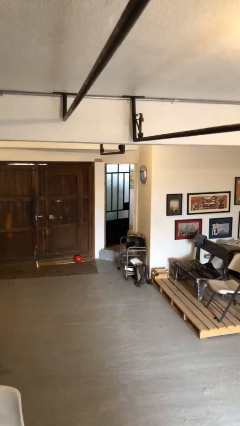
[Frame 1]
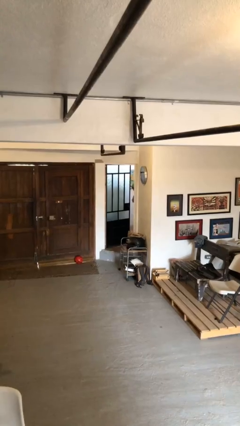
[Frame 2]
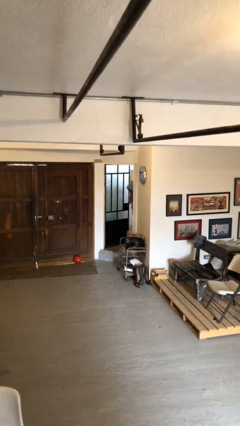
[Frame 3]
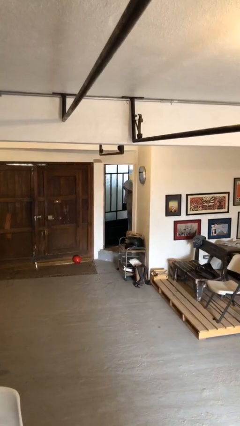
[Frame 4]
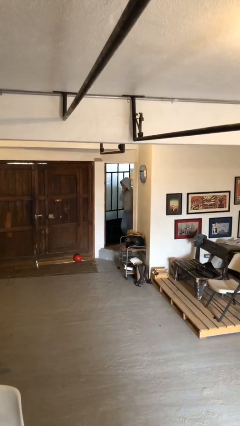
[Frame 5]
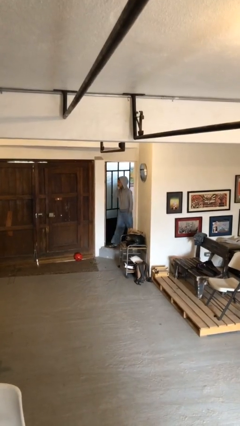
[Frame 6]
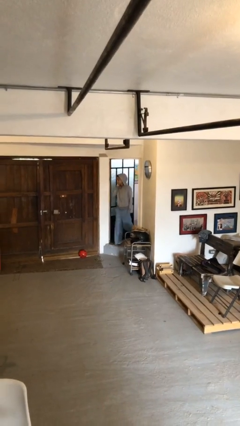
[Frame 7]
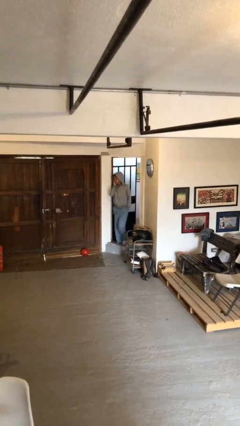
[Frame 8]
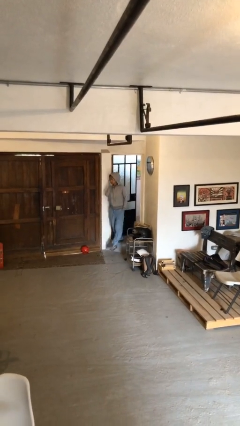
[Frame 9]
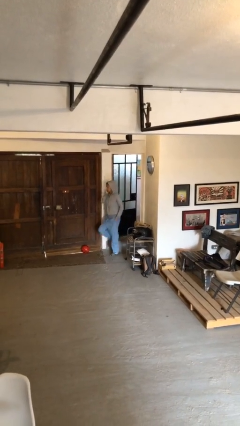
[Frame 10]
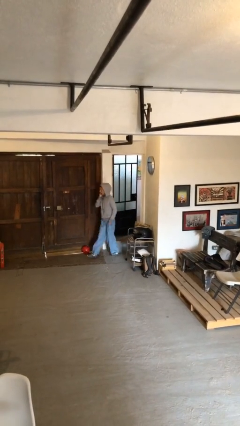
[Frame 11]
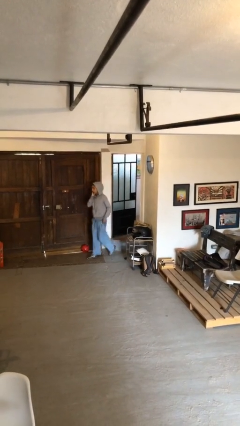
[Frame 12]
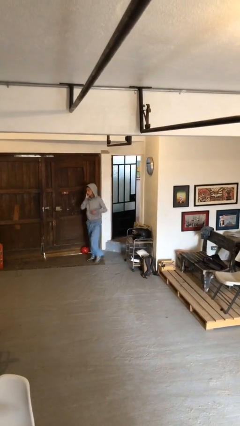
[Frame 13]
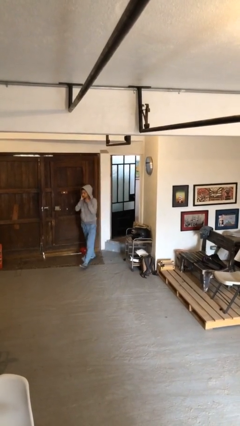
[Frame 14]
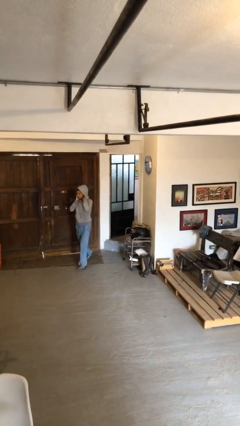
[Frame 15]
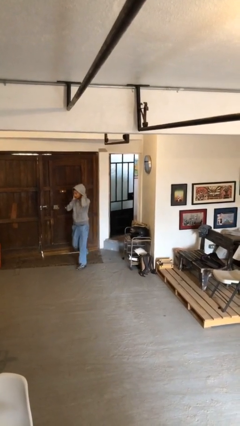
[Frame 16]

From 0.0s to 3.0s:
person enters scene through structure

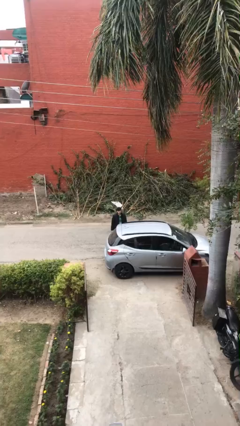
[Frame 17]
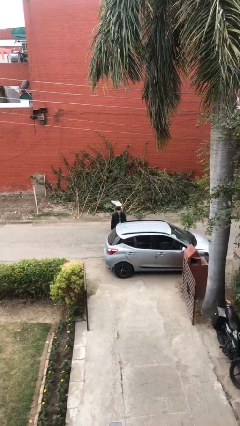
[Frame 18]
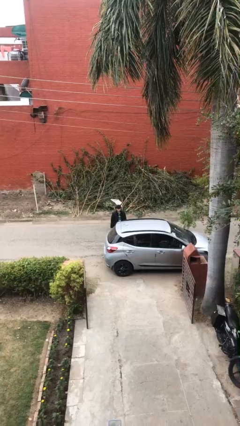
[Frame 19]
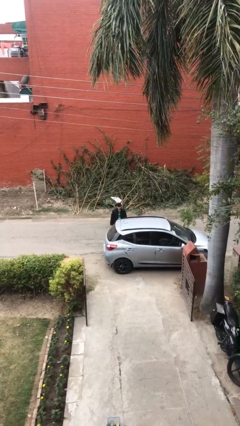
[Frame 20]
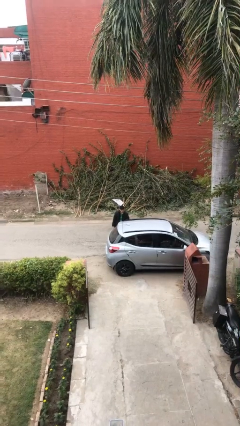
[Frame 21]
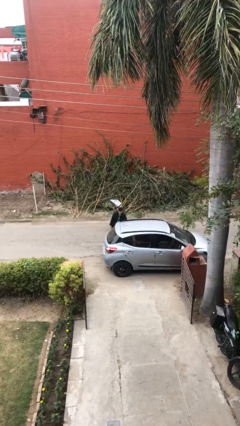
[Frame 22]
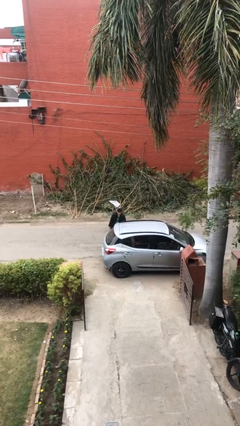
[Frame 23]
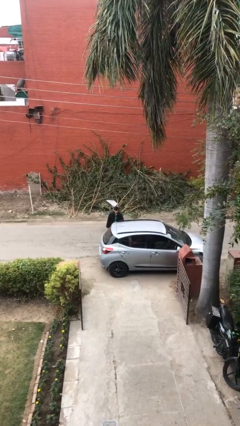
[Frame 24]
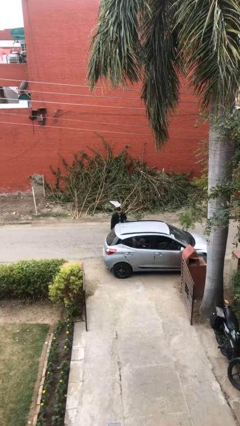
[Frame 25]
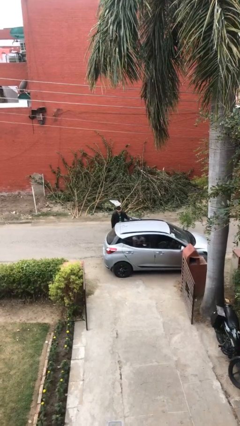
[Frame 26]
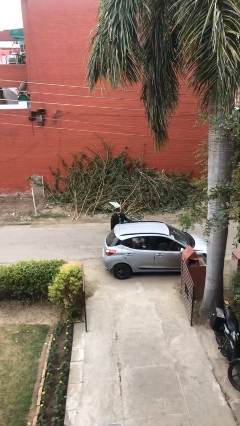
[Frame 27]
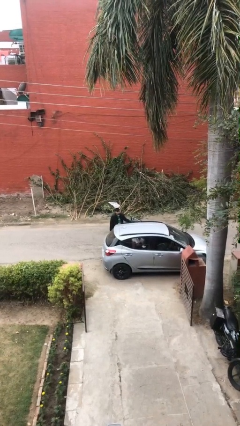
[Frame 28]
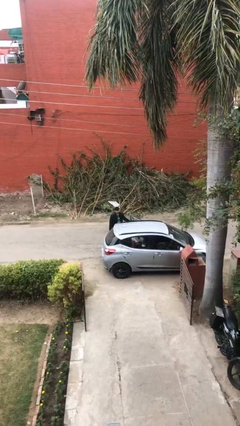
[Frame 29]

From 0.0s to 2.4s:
person opens car door

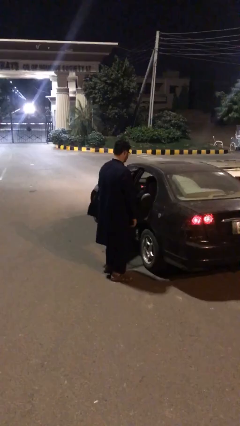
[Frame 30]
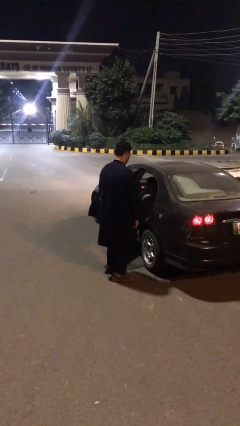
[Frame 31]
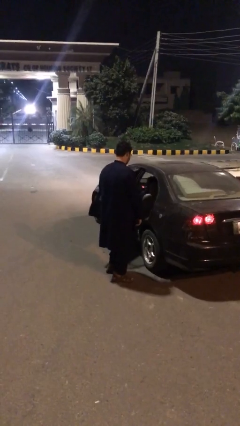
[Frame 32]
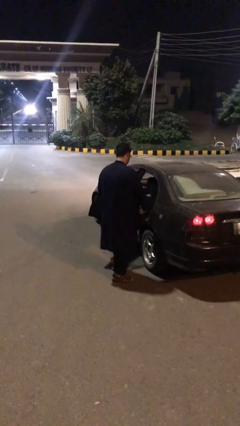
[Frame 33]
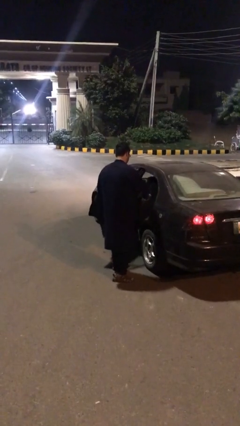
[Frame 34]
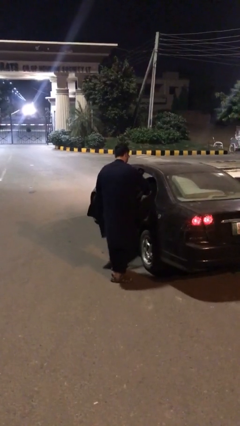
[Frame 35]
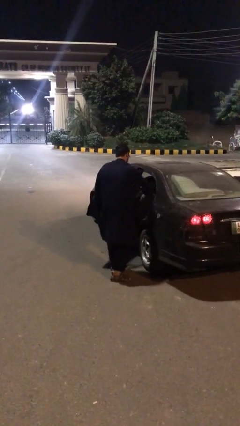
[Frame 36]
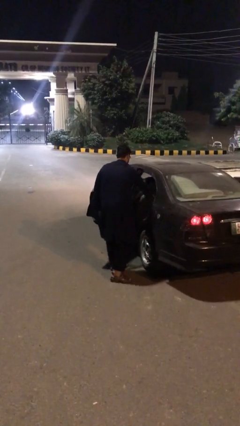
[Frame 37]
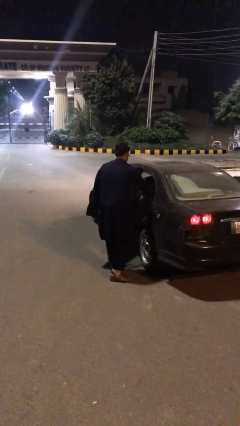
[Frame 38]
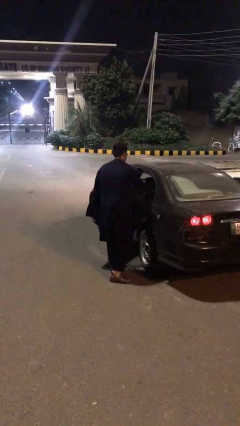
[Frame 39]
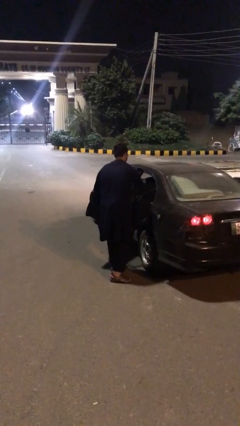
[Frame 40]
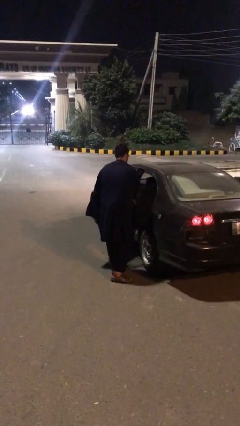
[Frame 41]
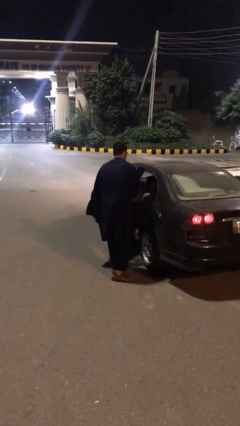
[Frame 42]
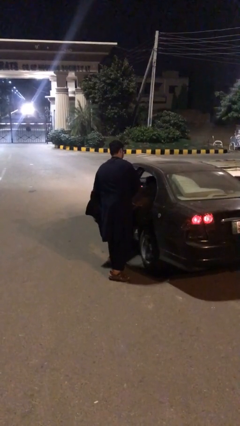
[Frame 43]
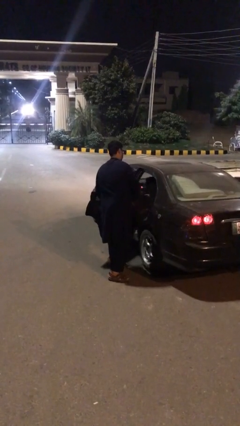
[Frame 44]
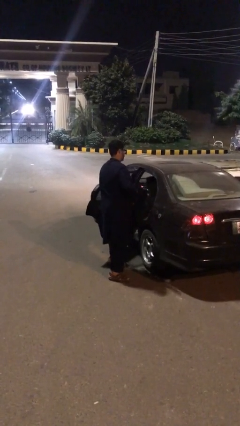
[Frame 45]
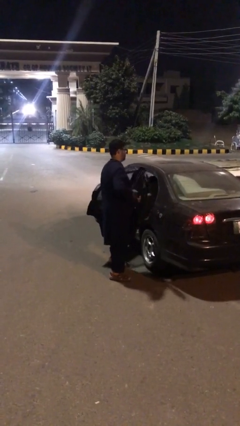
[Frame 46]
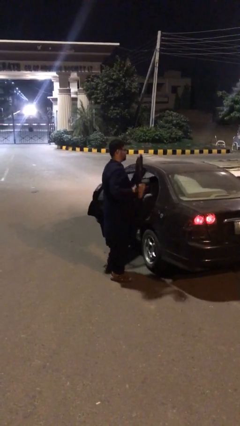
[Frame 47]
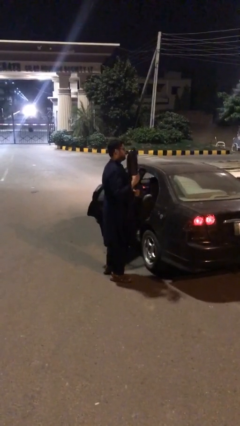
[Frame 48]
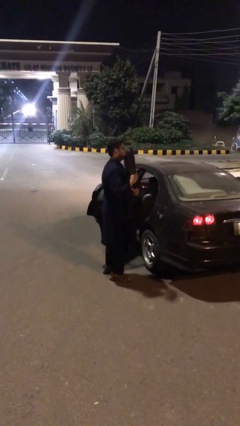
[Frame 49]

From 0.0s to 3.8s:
person unloads car

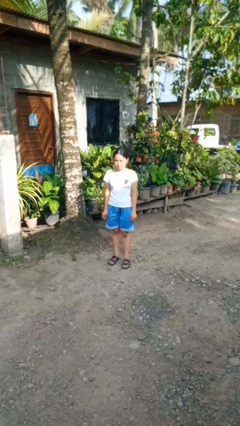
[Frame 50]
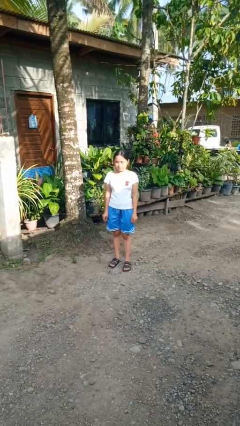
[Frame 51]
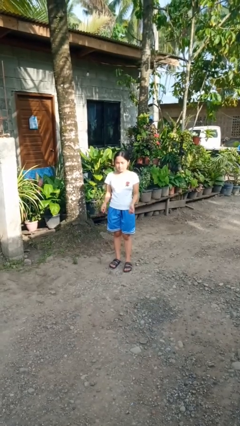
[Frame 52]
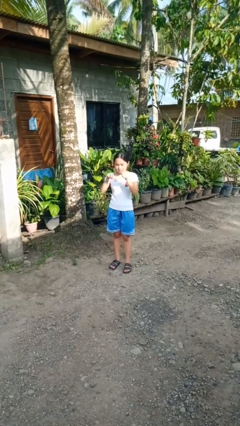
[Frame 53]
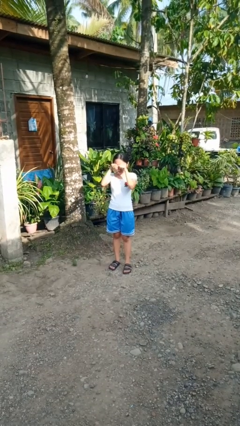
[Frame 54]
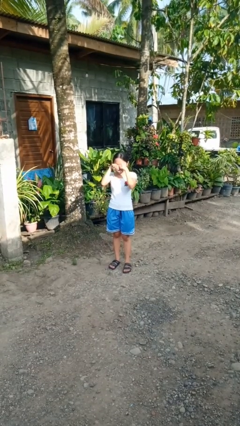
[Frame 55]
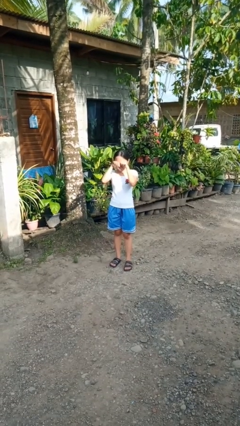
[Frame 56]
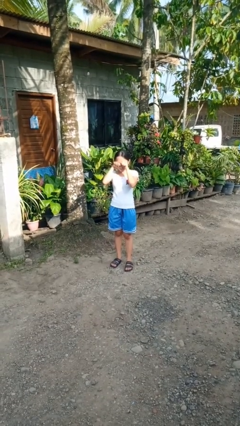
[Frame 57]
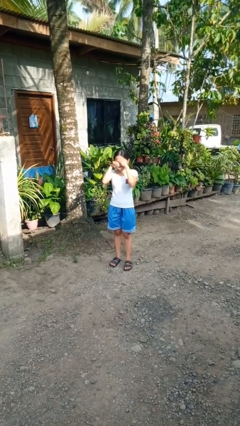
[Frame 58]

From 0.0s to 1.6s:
person rubs eyes

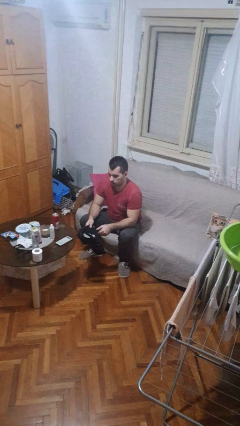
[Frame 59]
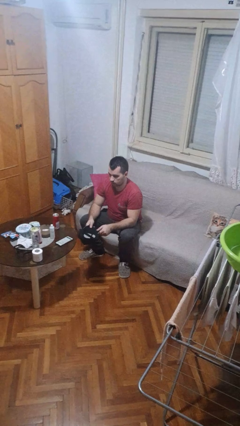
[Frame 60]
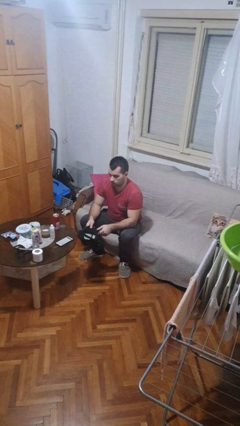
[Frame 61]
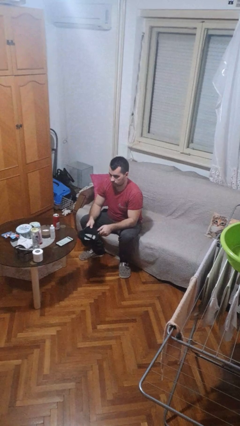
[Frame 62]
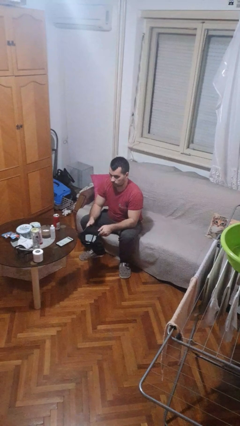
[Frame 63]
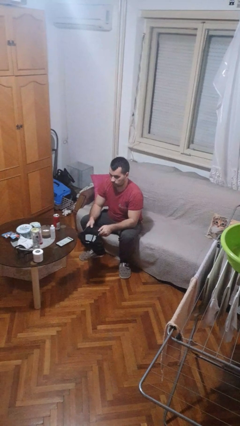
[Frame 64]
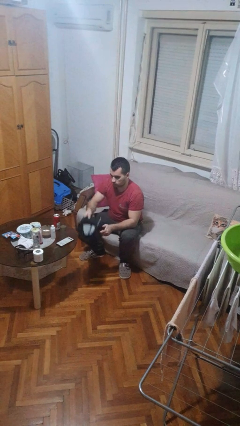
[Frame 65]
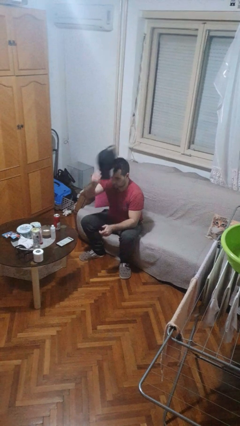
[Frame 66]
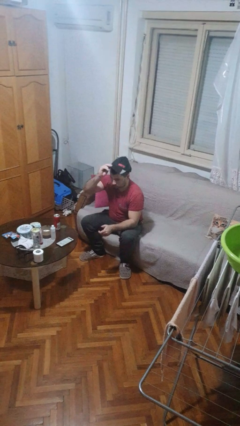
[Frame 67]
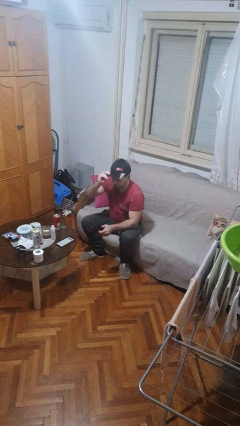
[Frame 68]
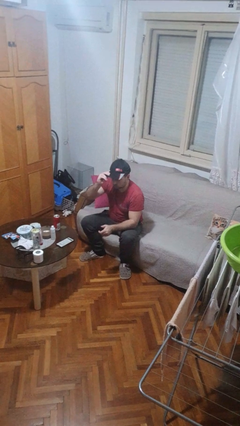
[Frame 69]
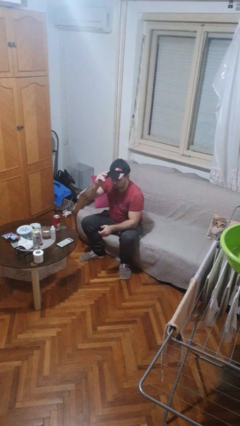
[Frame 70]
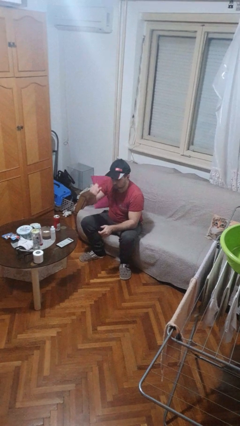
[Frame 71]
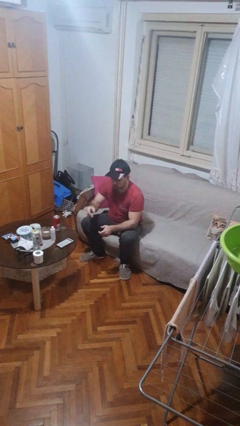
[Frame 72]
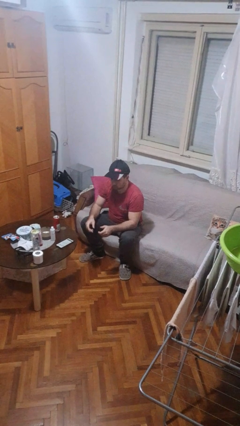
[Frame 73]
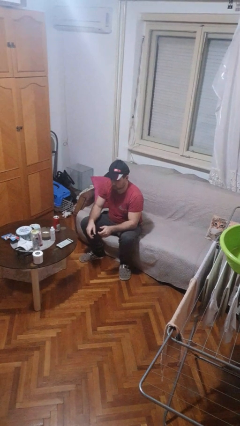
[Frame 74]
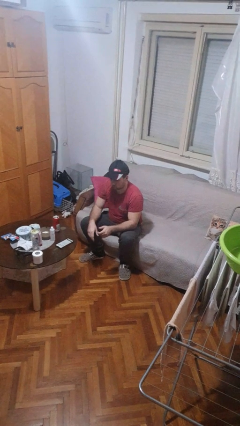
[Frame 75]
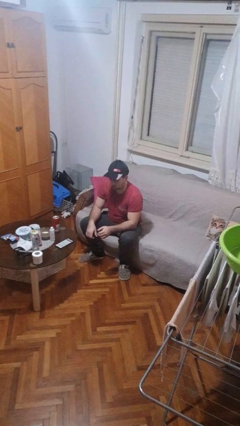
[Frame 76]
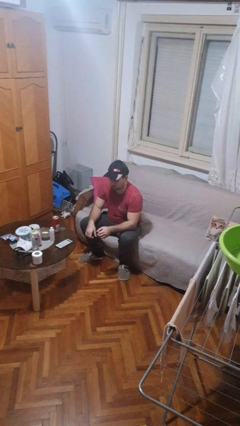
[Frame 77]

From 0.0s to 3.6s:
person puts on hat

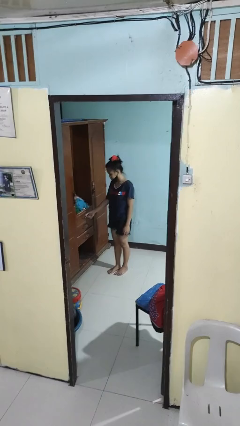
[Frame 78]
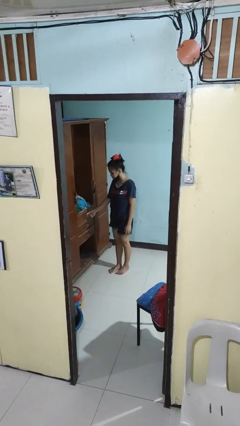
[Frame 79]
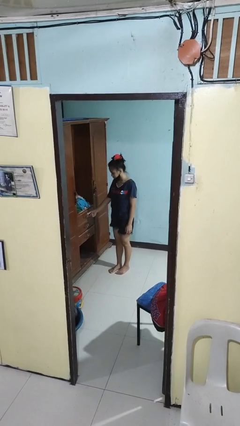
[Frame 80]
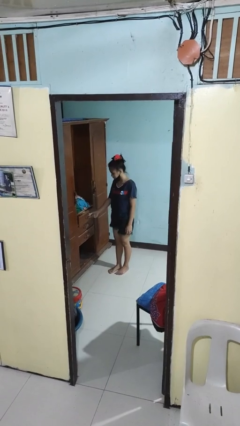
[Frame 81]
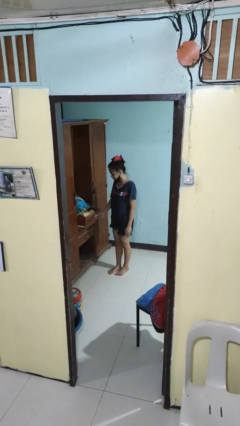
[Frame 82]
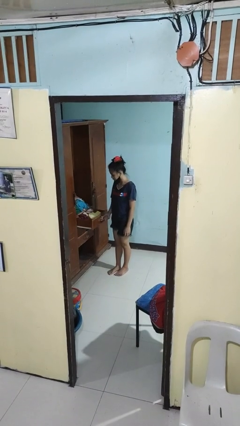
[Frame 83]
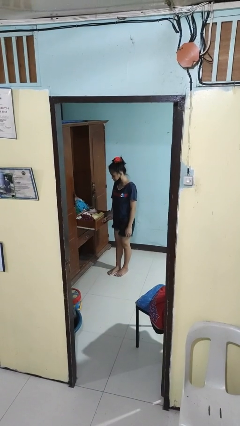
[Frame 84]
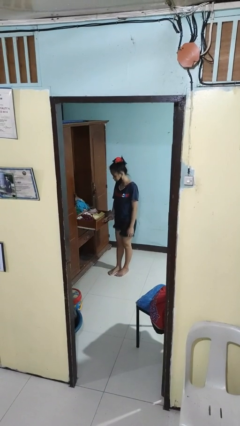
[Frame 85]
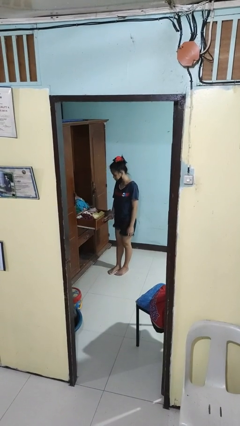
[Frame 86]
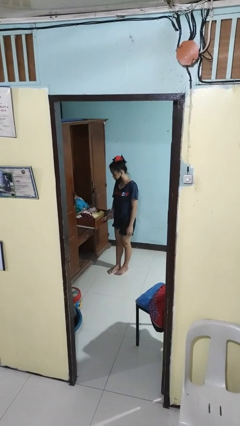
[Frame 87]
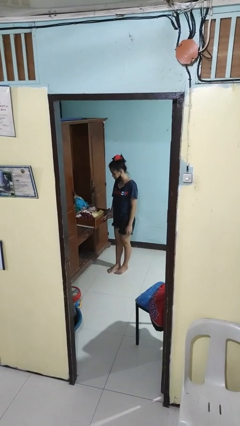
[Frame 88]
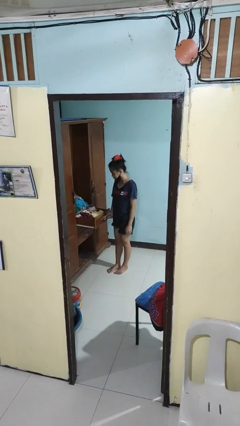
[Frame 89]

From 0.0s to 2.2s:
person opens dresser drawer

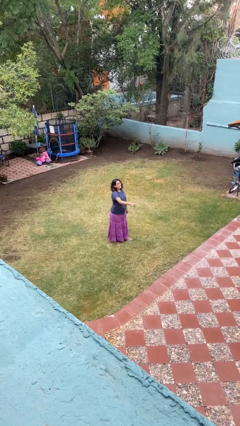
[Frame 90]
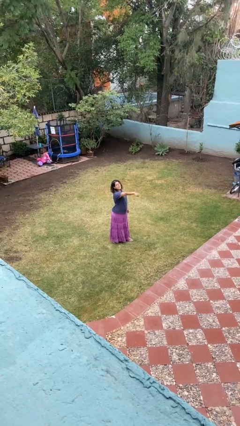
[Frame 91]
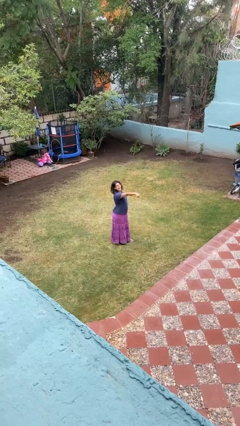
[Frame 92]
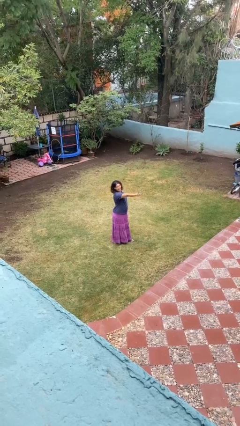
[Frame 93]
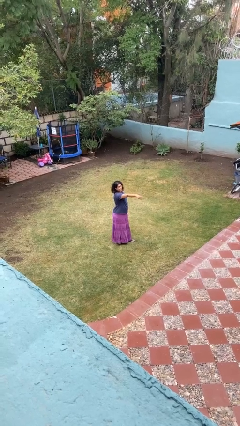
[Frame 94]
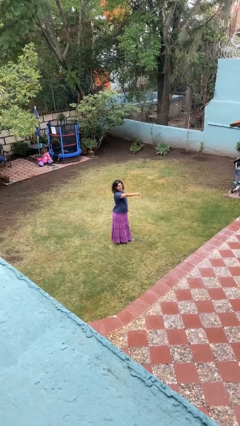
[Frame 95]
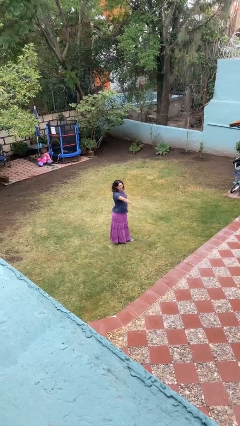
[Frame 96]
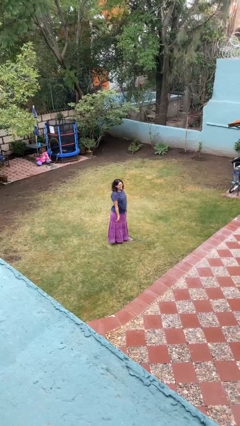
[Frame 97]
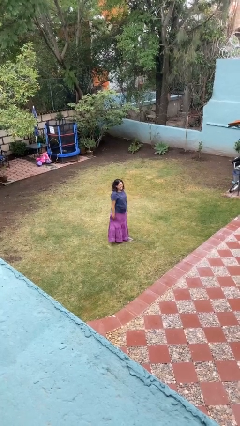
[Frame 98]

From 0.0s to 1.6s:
person points at person
